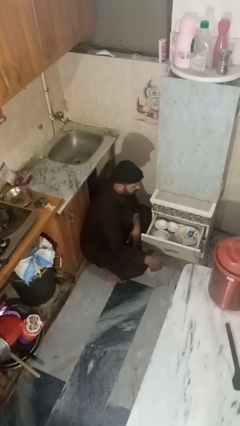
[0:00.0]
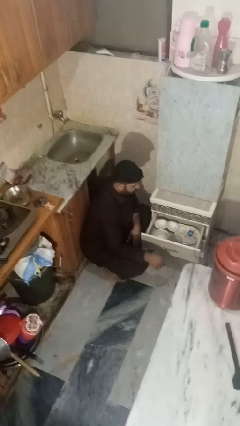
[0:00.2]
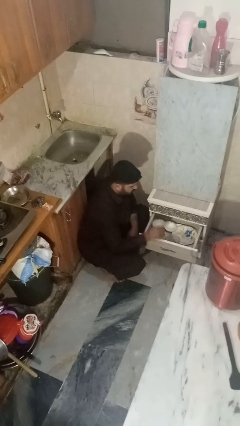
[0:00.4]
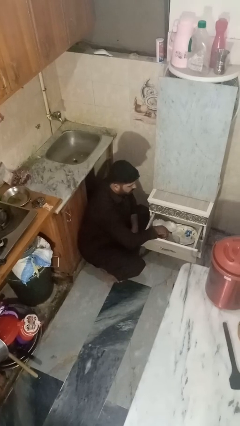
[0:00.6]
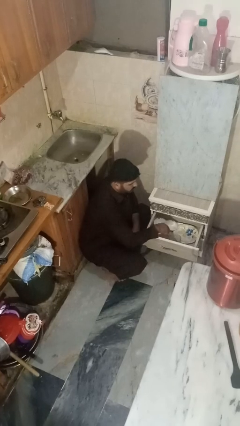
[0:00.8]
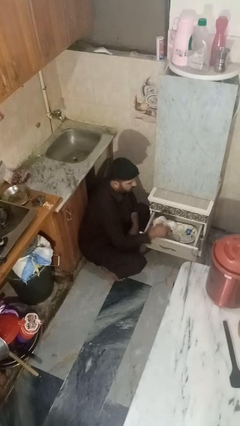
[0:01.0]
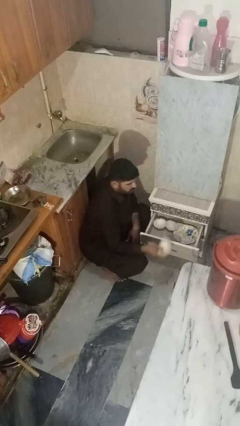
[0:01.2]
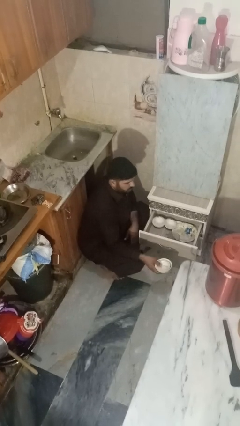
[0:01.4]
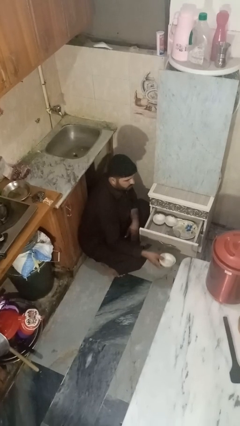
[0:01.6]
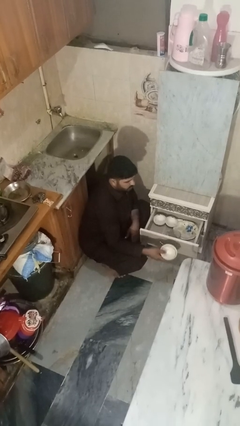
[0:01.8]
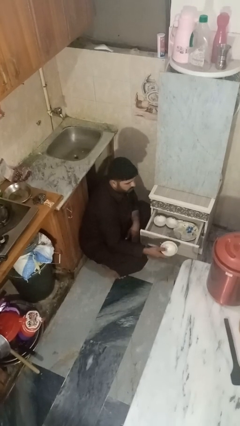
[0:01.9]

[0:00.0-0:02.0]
person takes object from kitchen drawer

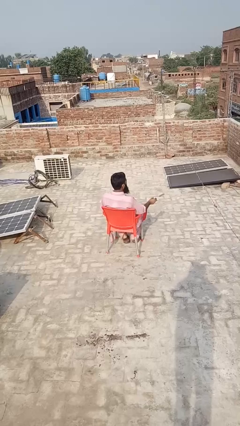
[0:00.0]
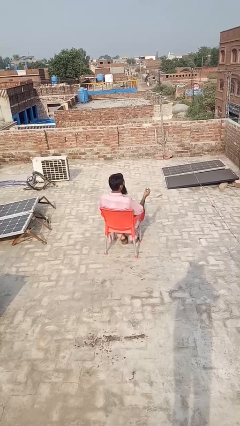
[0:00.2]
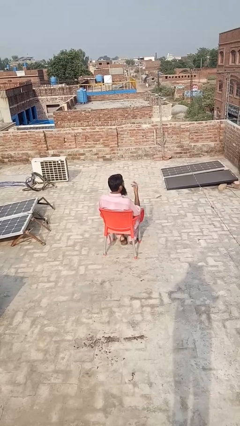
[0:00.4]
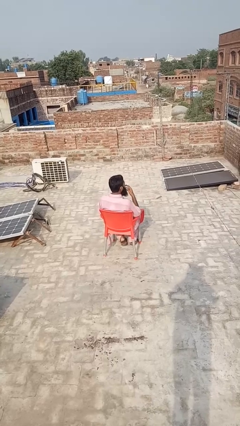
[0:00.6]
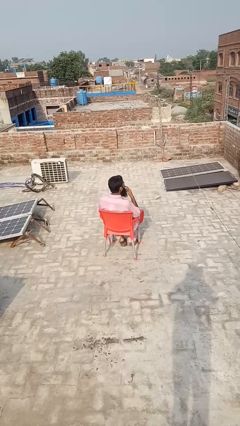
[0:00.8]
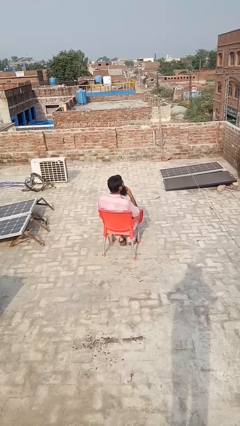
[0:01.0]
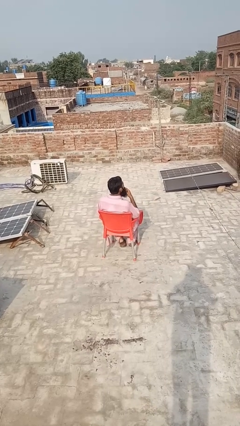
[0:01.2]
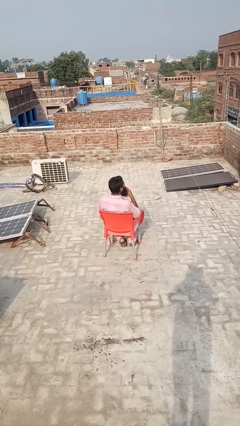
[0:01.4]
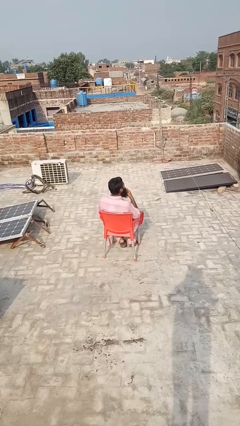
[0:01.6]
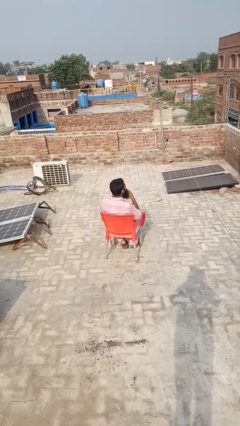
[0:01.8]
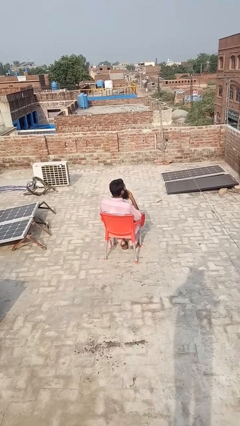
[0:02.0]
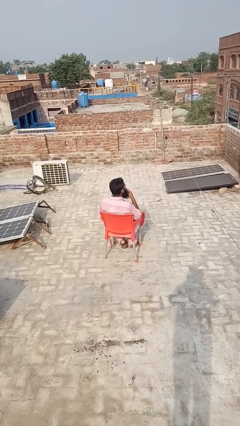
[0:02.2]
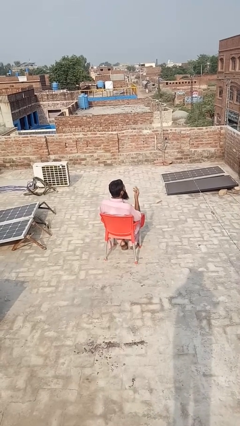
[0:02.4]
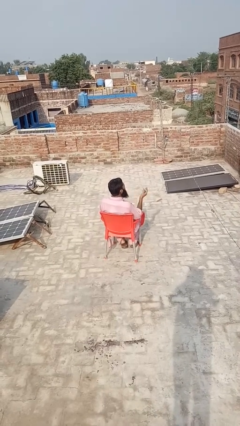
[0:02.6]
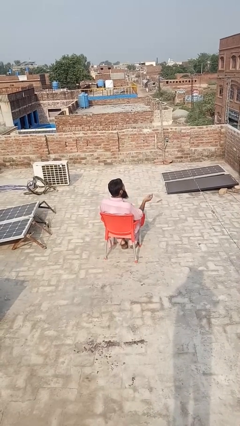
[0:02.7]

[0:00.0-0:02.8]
person vapes

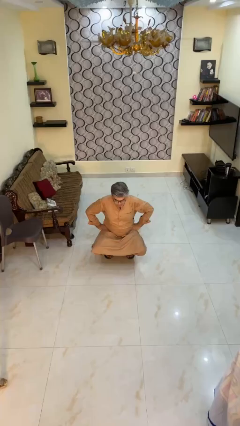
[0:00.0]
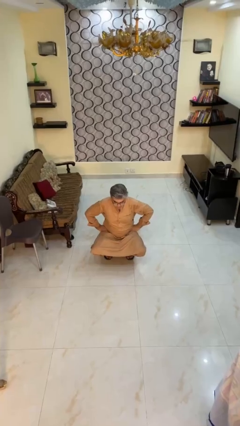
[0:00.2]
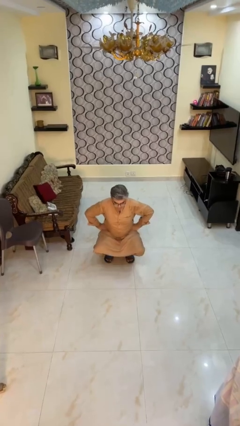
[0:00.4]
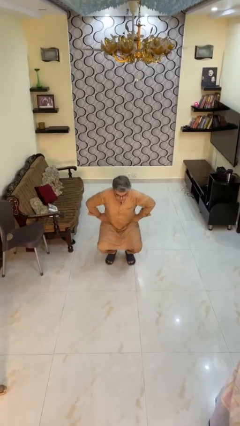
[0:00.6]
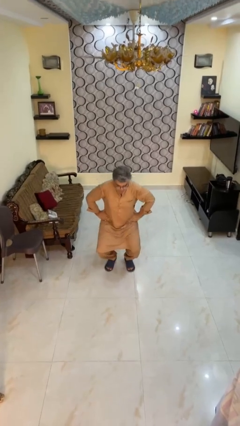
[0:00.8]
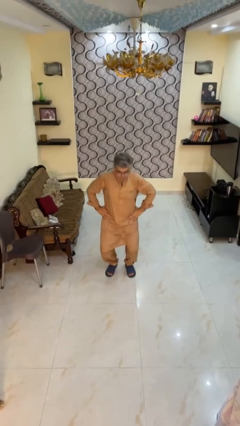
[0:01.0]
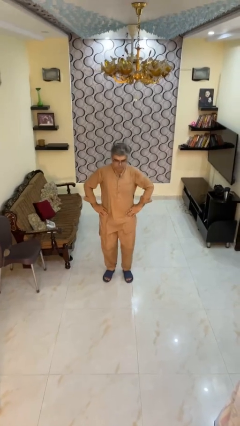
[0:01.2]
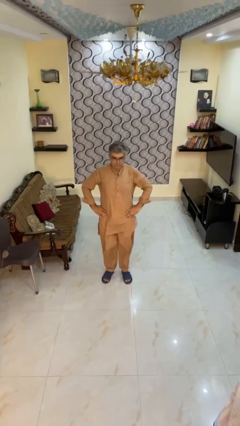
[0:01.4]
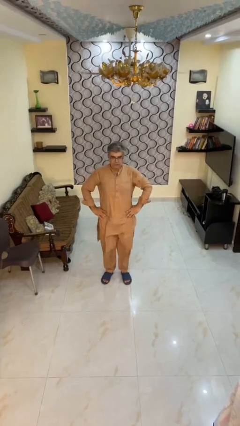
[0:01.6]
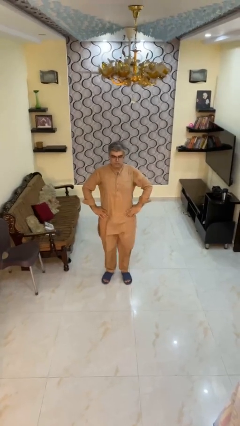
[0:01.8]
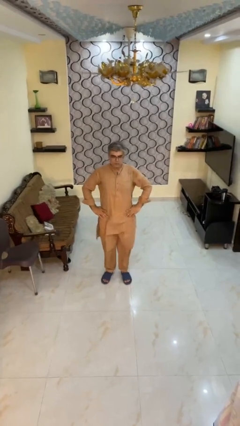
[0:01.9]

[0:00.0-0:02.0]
person stands up

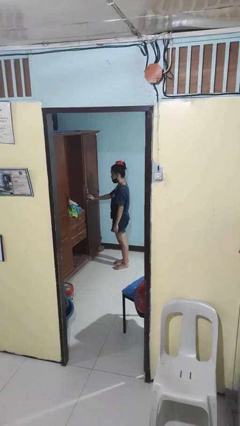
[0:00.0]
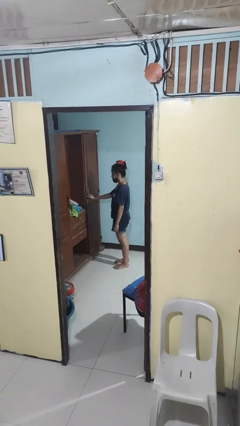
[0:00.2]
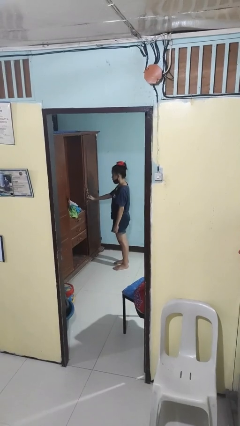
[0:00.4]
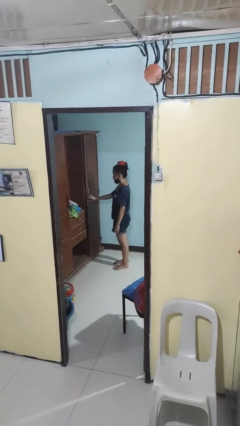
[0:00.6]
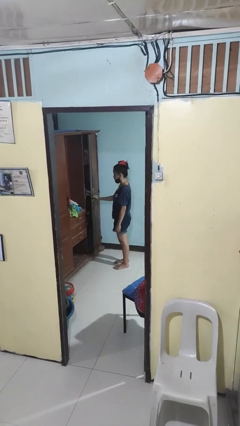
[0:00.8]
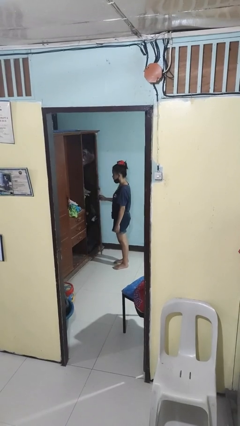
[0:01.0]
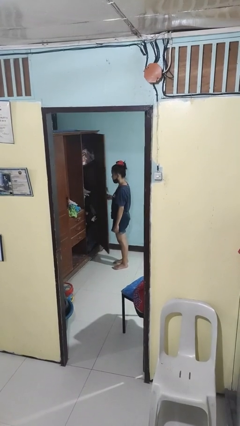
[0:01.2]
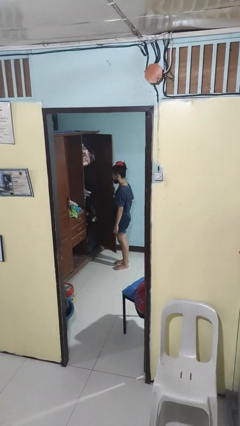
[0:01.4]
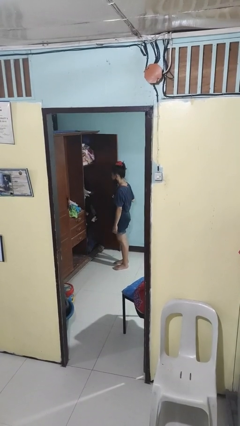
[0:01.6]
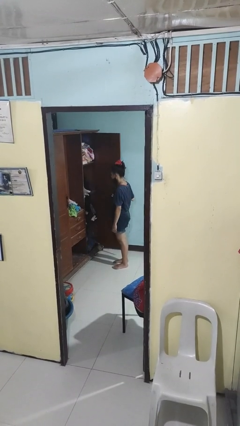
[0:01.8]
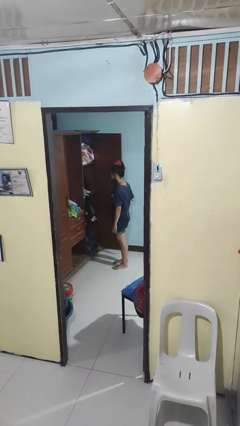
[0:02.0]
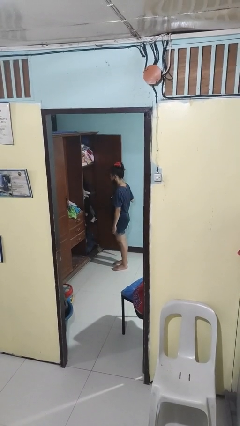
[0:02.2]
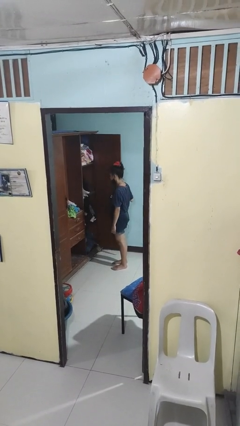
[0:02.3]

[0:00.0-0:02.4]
person opens closet door

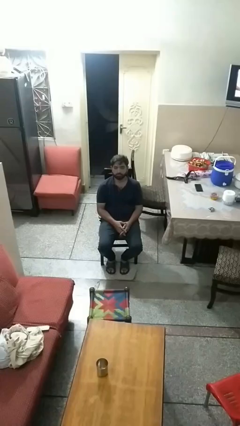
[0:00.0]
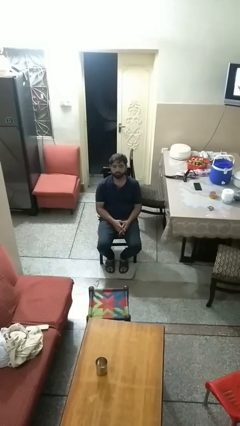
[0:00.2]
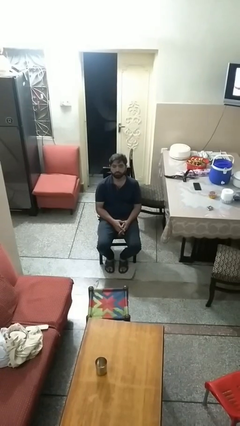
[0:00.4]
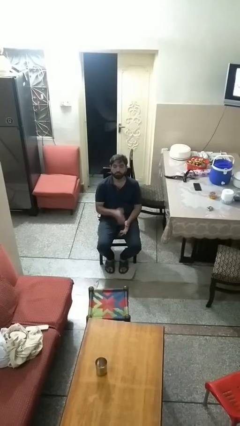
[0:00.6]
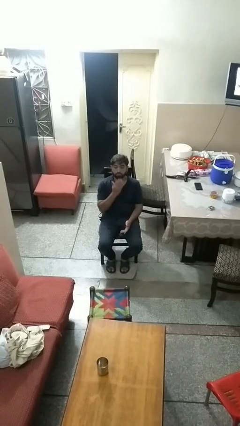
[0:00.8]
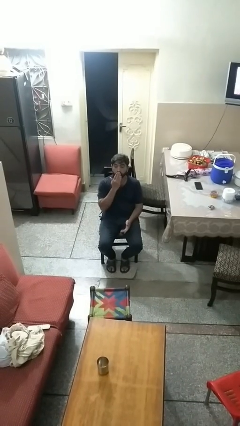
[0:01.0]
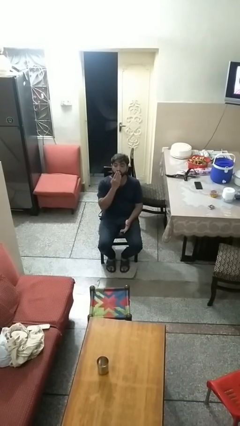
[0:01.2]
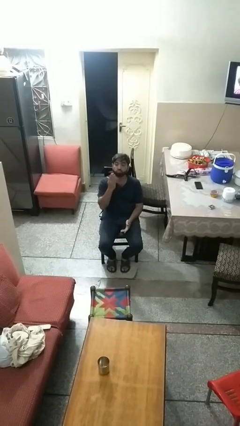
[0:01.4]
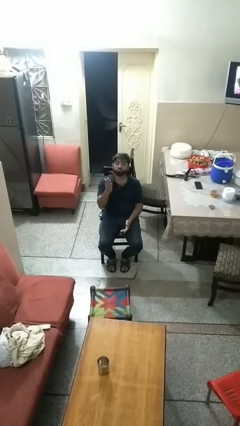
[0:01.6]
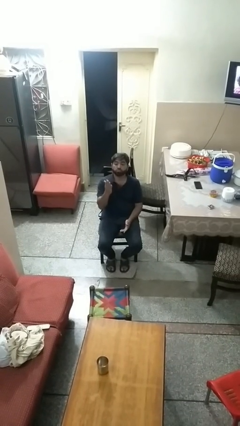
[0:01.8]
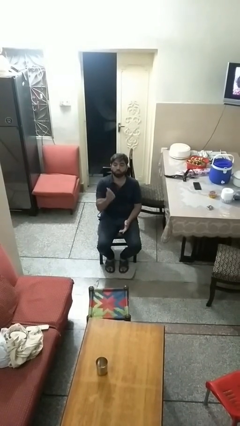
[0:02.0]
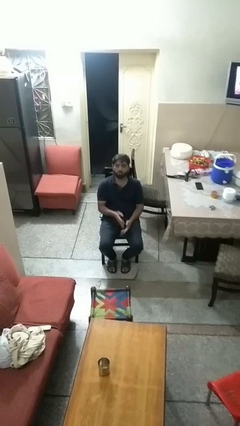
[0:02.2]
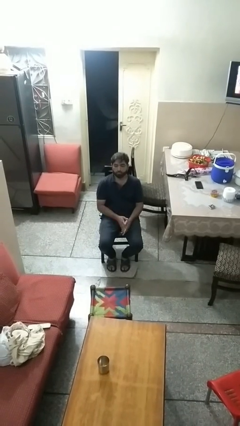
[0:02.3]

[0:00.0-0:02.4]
person gestures blow kiss

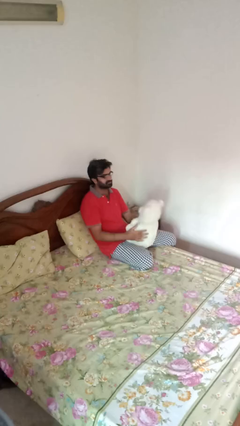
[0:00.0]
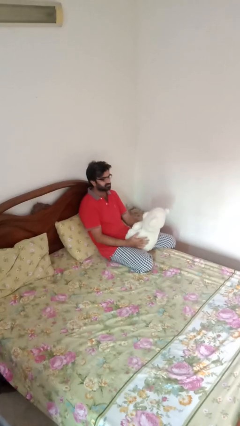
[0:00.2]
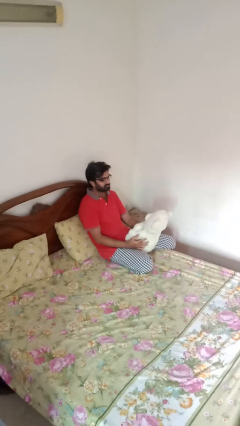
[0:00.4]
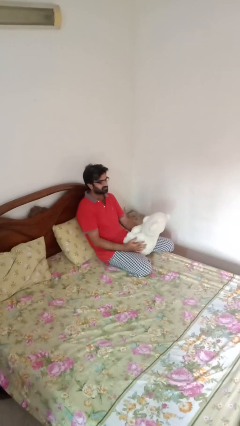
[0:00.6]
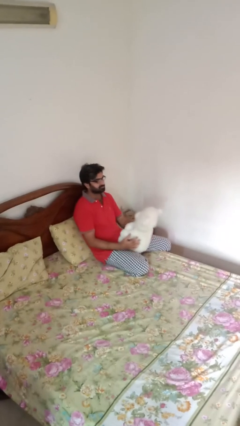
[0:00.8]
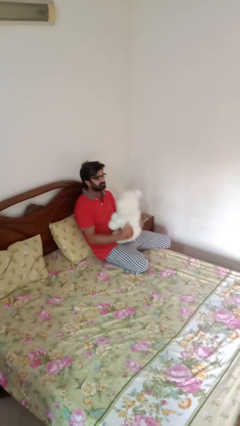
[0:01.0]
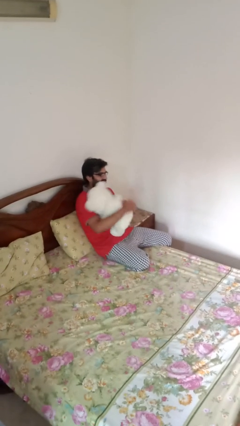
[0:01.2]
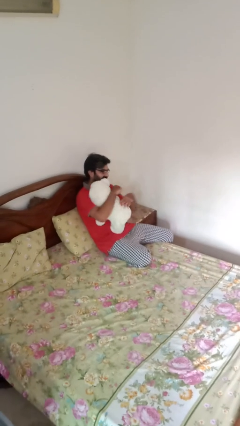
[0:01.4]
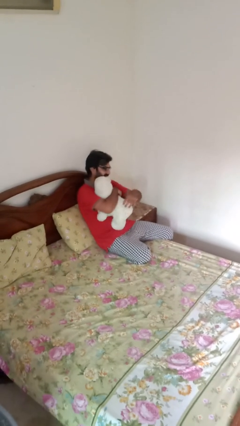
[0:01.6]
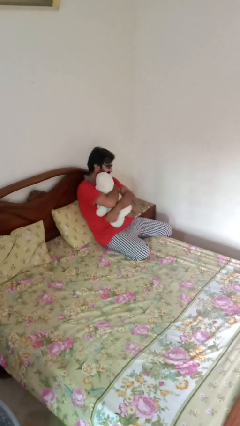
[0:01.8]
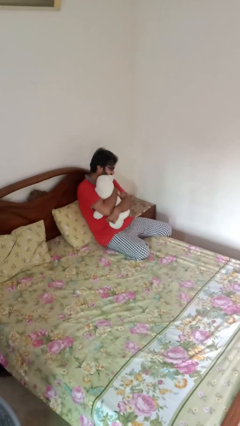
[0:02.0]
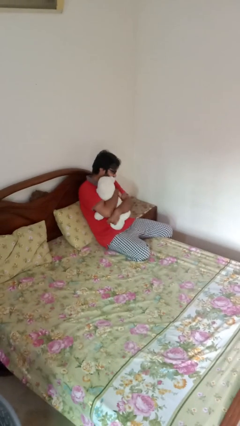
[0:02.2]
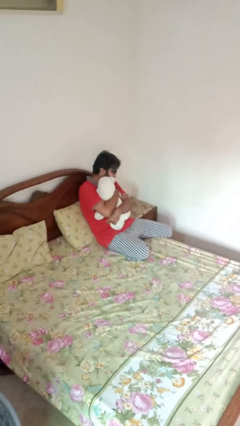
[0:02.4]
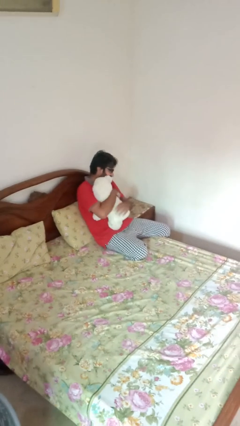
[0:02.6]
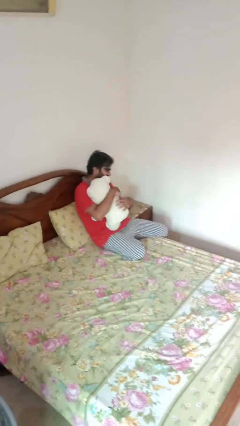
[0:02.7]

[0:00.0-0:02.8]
person hugs stuffed animal

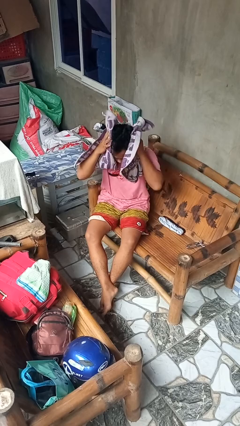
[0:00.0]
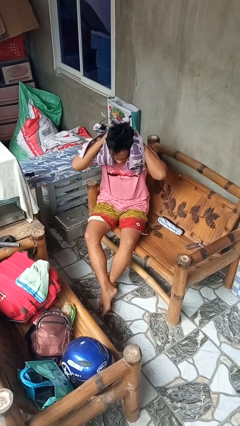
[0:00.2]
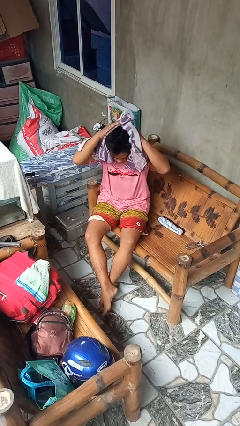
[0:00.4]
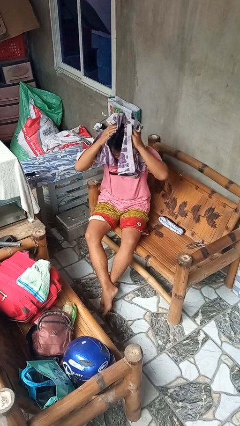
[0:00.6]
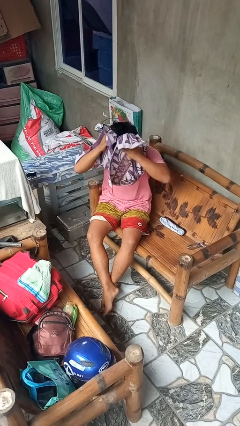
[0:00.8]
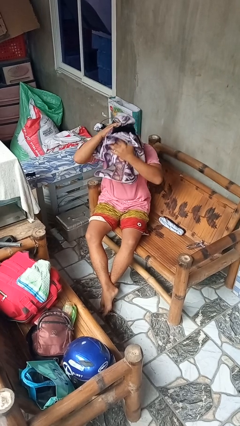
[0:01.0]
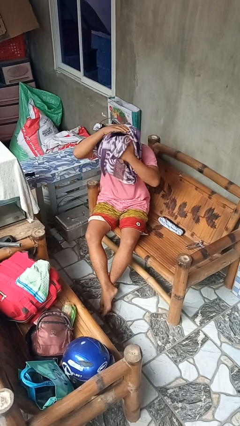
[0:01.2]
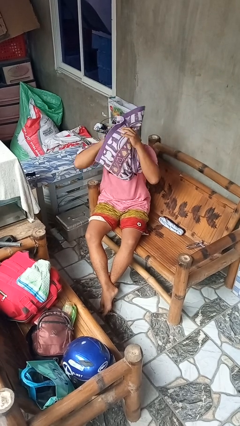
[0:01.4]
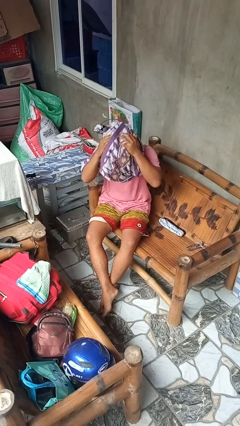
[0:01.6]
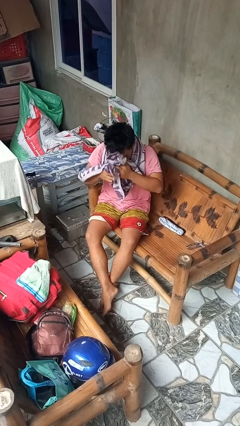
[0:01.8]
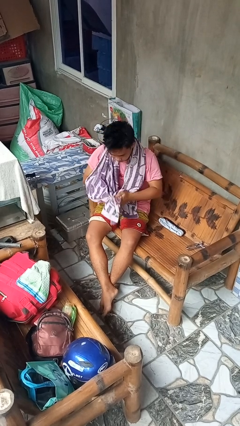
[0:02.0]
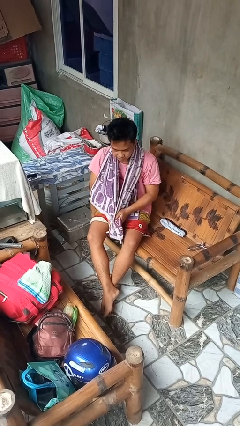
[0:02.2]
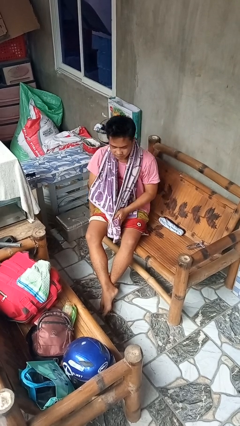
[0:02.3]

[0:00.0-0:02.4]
person dries hair with towel
